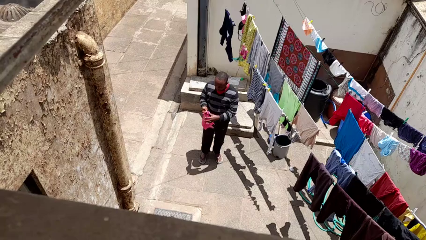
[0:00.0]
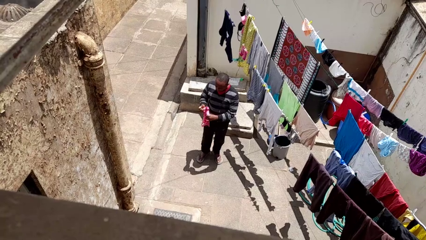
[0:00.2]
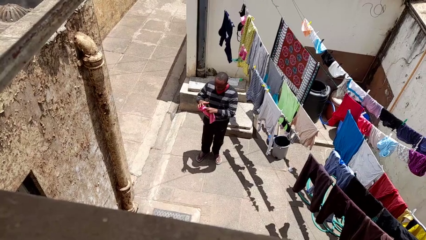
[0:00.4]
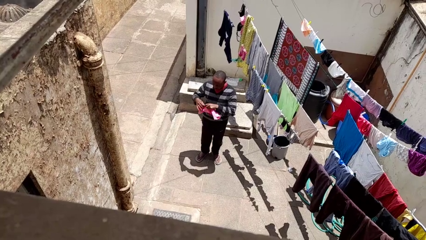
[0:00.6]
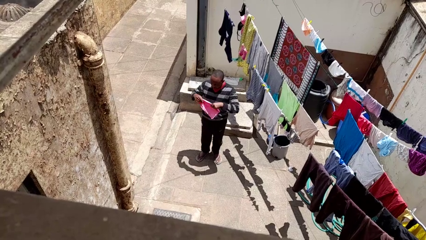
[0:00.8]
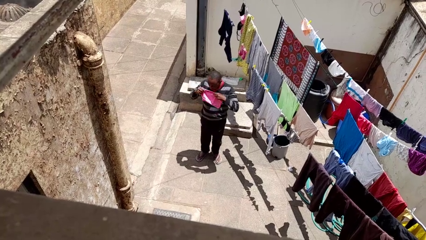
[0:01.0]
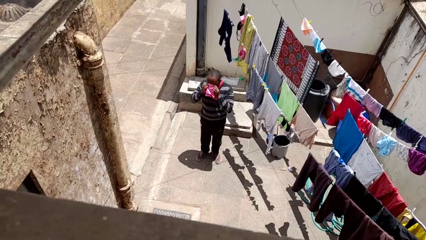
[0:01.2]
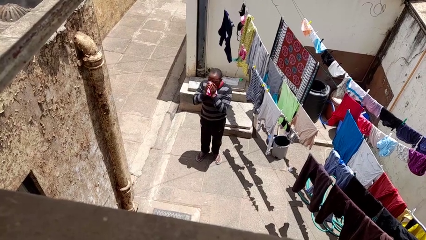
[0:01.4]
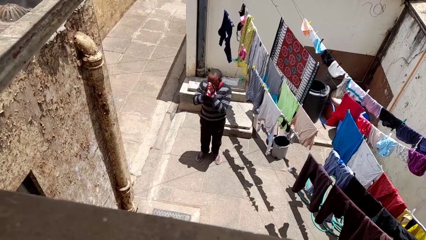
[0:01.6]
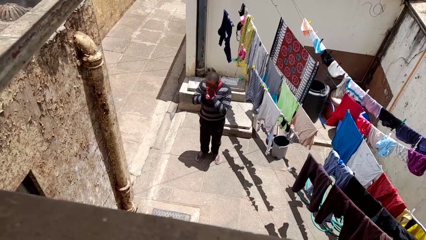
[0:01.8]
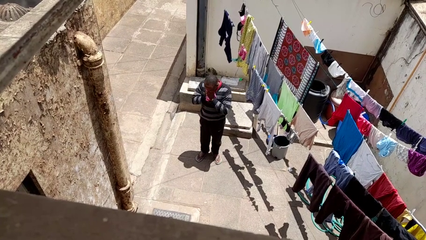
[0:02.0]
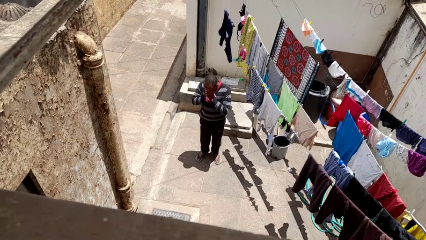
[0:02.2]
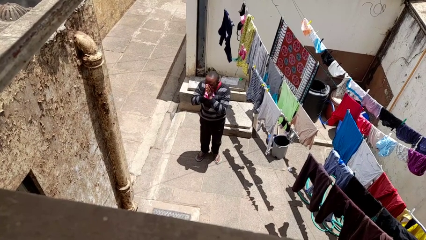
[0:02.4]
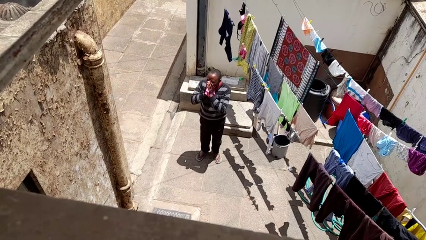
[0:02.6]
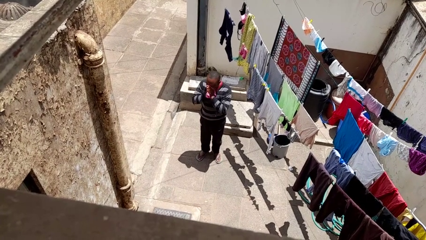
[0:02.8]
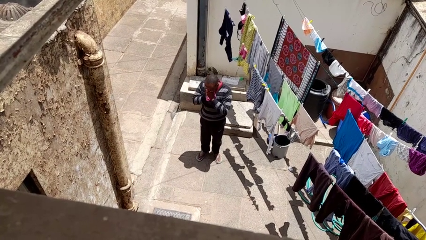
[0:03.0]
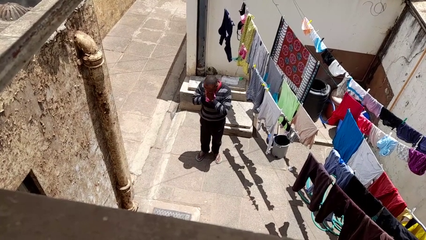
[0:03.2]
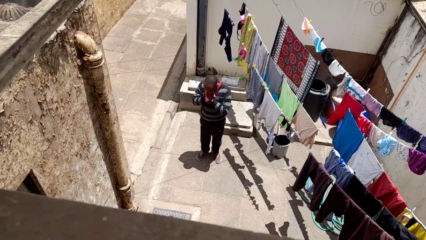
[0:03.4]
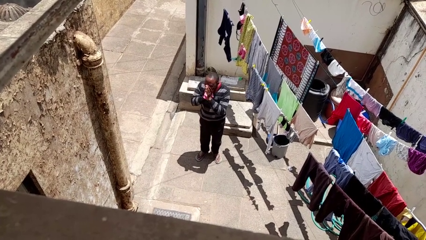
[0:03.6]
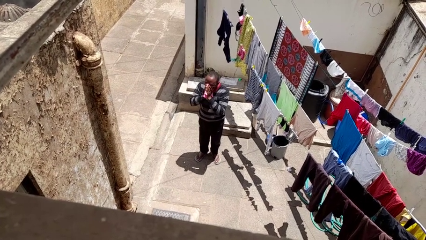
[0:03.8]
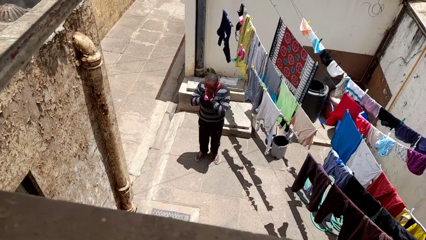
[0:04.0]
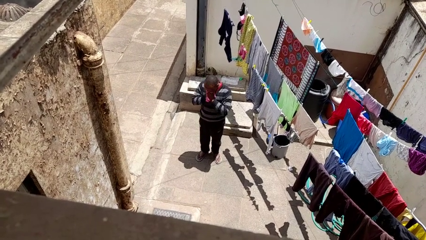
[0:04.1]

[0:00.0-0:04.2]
person blows nose

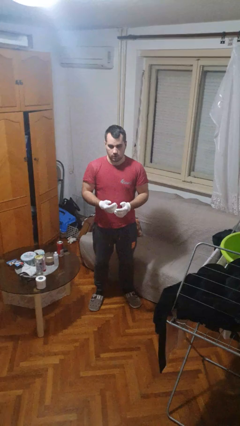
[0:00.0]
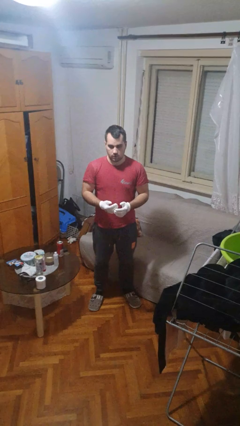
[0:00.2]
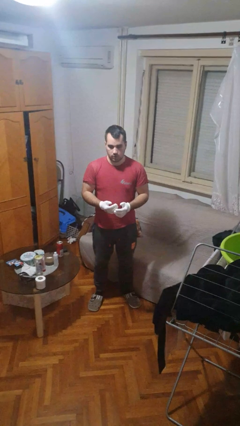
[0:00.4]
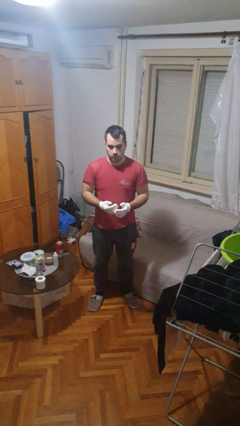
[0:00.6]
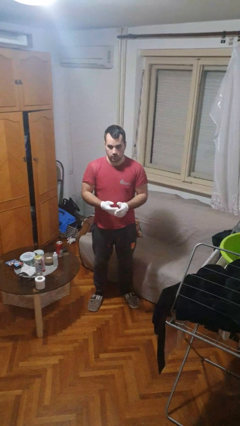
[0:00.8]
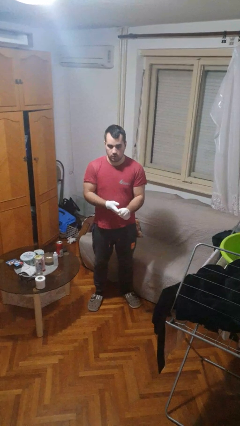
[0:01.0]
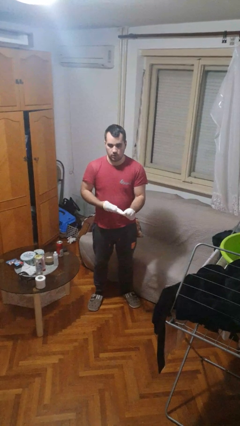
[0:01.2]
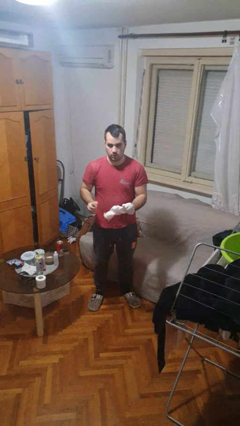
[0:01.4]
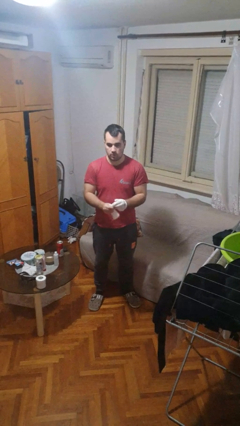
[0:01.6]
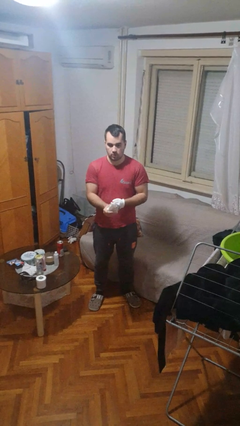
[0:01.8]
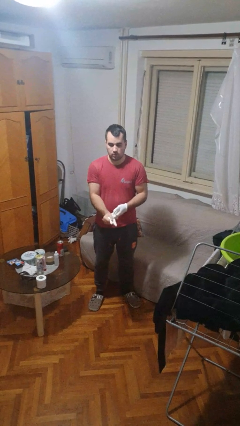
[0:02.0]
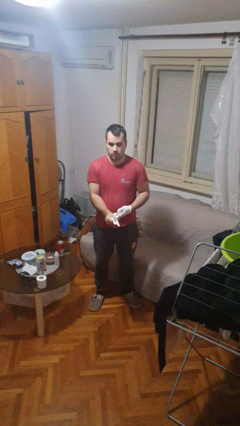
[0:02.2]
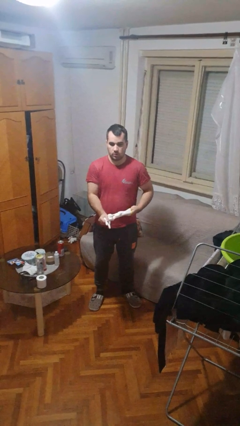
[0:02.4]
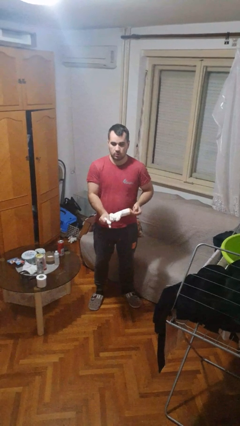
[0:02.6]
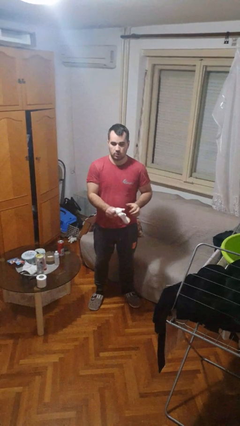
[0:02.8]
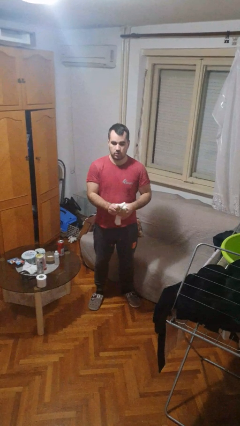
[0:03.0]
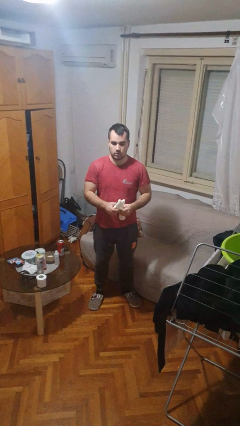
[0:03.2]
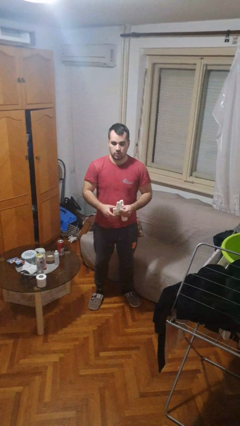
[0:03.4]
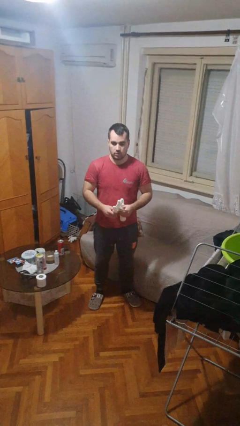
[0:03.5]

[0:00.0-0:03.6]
person takes off gloves

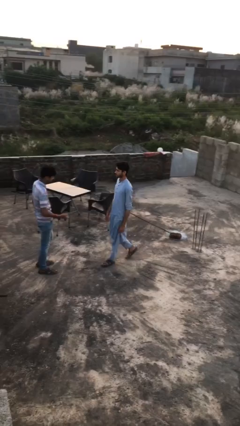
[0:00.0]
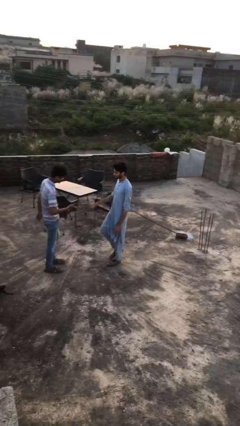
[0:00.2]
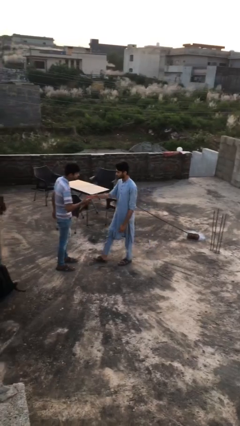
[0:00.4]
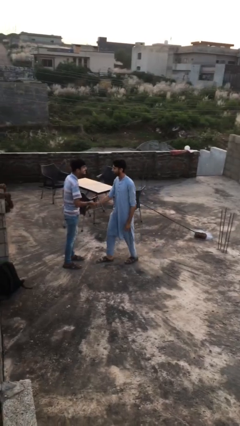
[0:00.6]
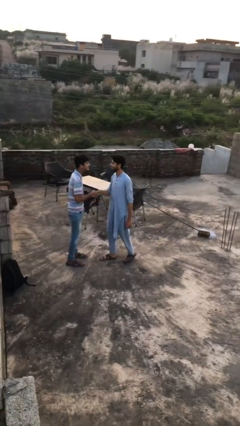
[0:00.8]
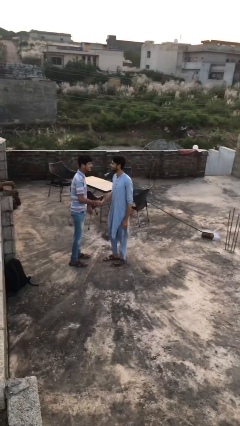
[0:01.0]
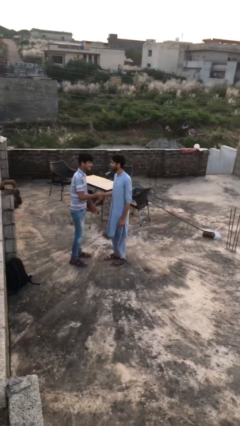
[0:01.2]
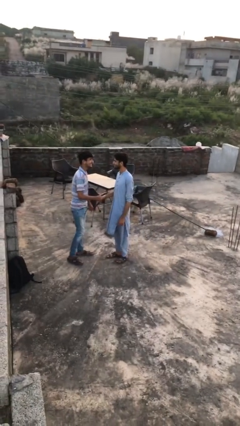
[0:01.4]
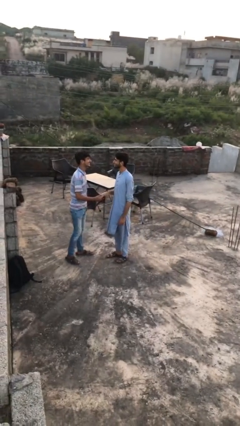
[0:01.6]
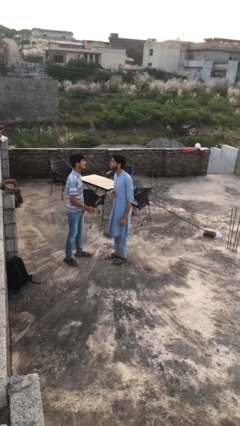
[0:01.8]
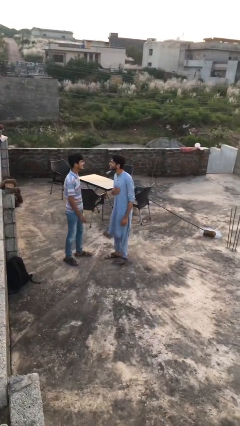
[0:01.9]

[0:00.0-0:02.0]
person shakes hand

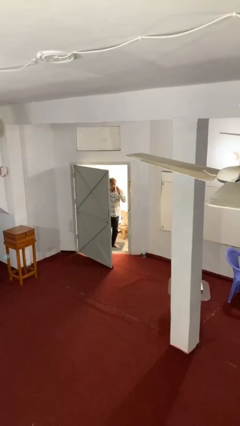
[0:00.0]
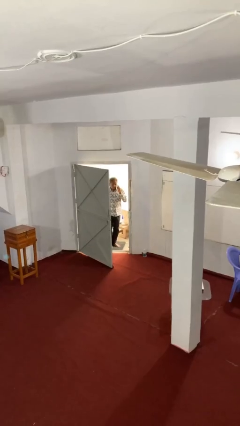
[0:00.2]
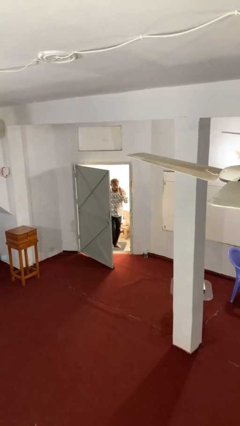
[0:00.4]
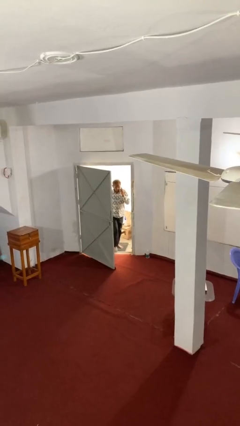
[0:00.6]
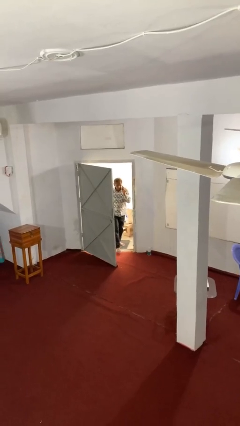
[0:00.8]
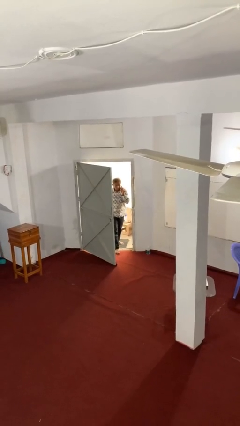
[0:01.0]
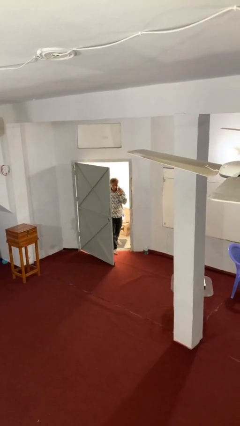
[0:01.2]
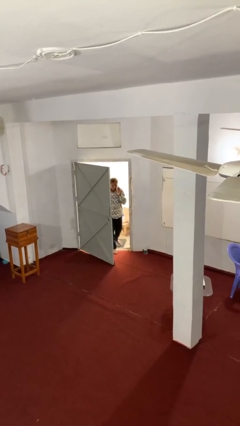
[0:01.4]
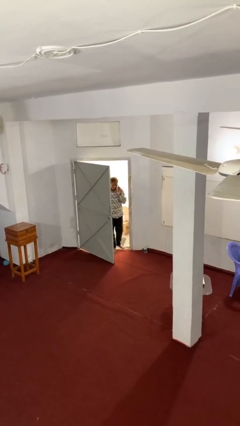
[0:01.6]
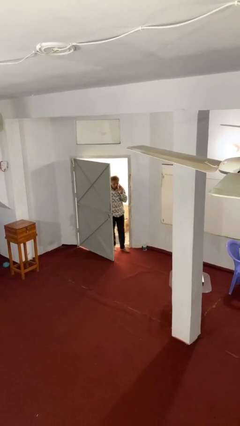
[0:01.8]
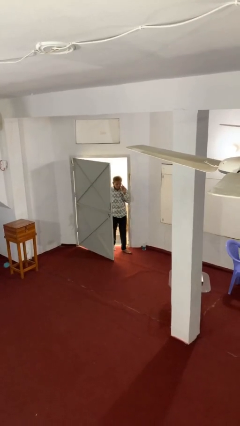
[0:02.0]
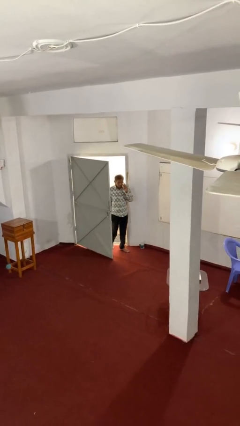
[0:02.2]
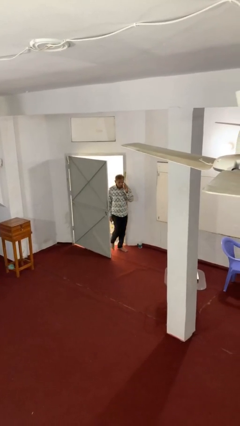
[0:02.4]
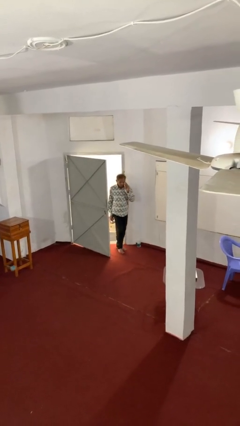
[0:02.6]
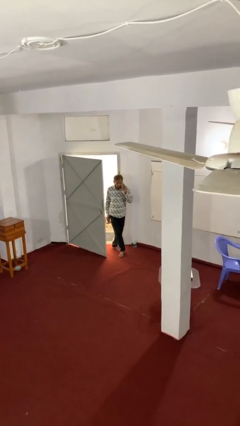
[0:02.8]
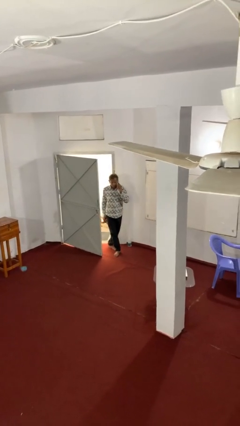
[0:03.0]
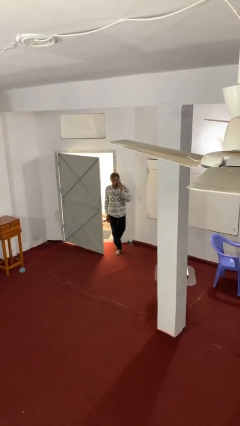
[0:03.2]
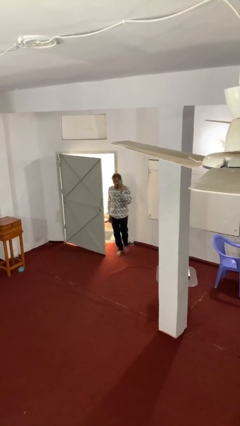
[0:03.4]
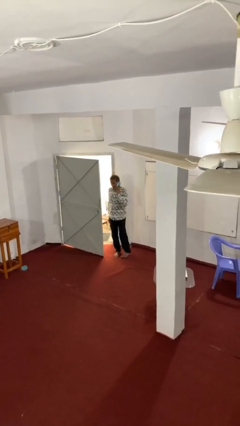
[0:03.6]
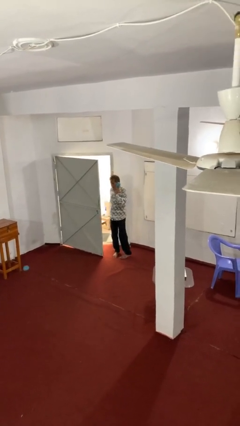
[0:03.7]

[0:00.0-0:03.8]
person enters scene through structure

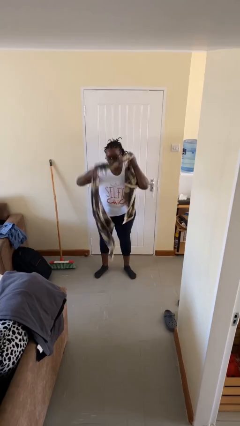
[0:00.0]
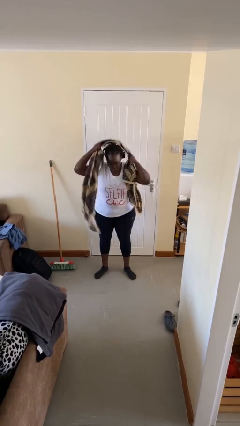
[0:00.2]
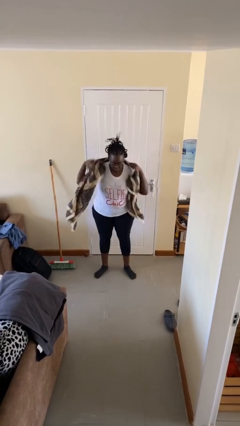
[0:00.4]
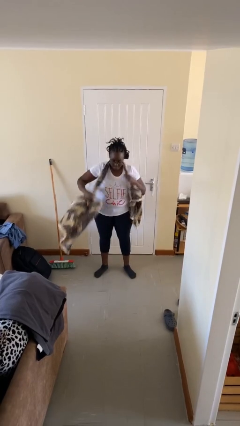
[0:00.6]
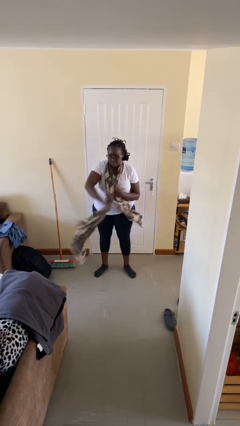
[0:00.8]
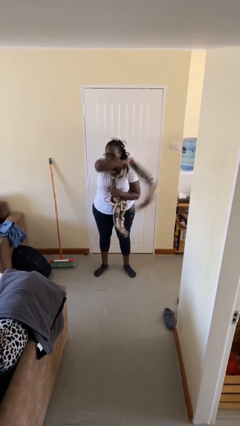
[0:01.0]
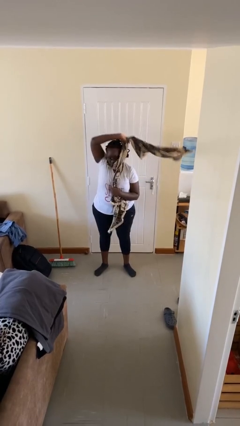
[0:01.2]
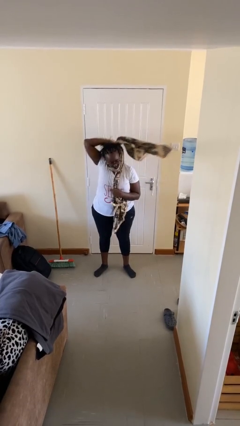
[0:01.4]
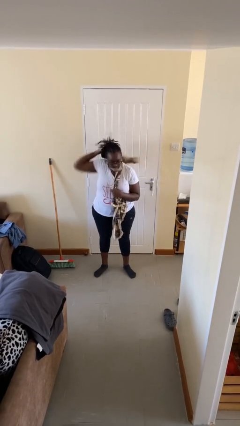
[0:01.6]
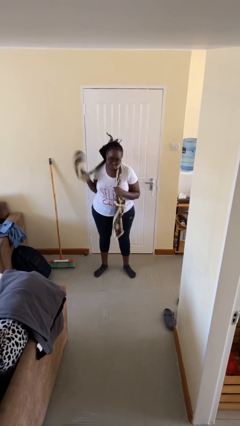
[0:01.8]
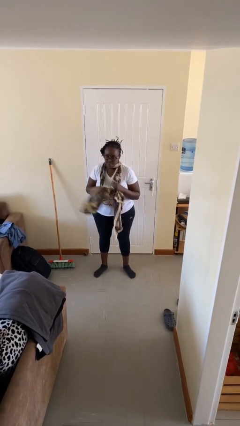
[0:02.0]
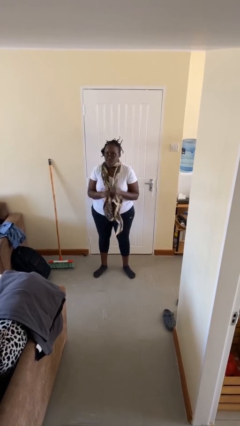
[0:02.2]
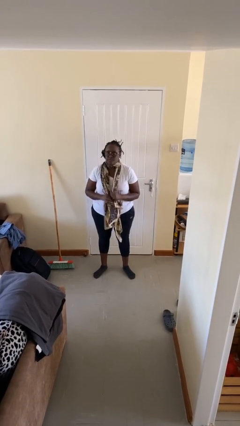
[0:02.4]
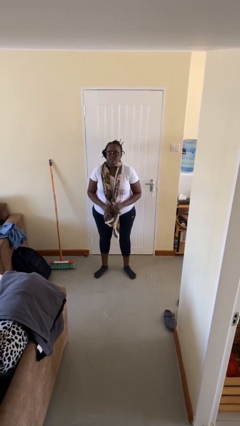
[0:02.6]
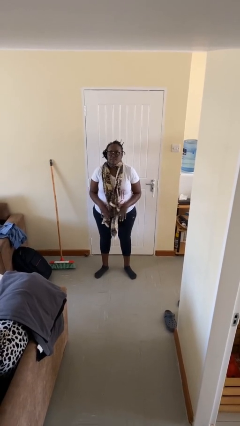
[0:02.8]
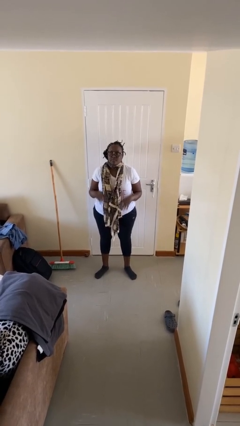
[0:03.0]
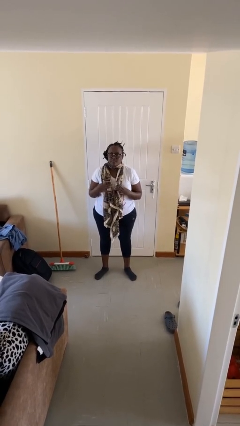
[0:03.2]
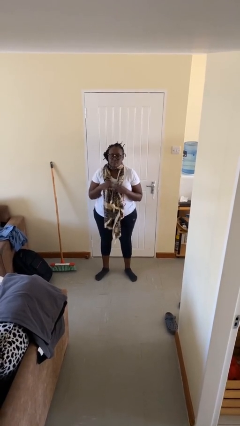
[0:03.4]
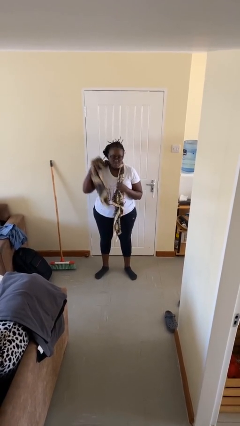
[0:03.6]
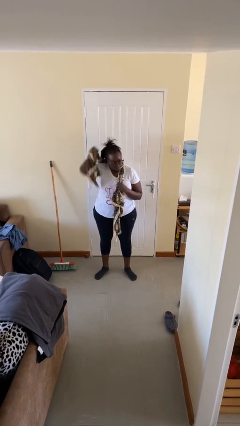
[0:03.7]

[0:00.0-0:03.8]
person puts on scarf
